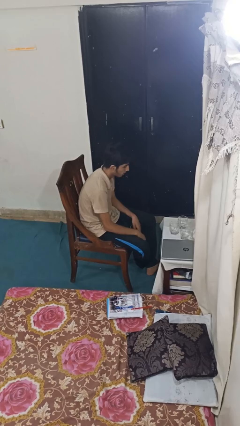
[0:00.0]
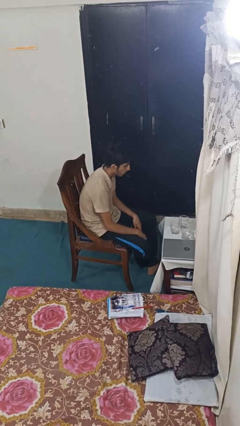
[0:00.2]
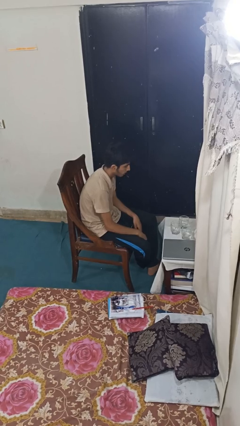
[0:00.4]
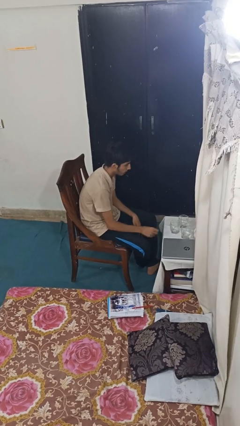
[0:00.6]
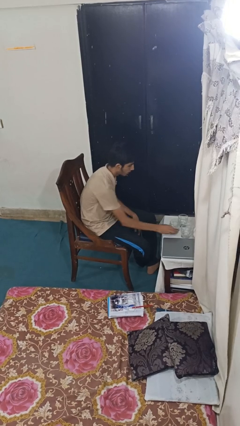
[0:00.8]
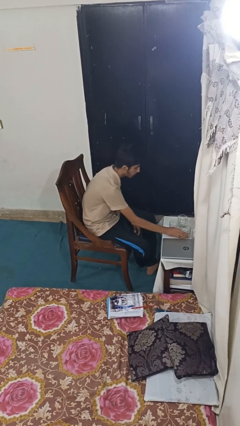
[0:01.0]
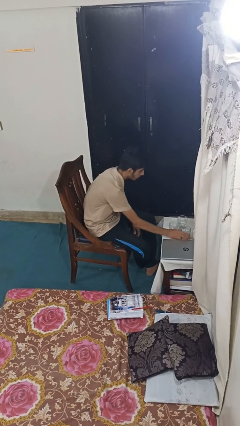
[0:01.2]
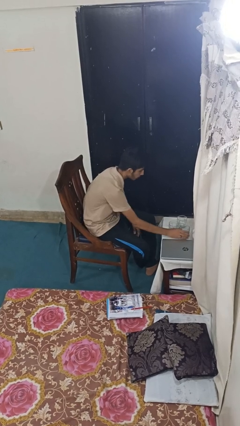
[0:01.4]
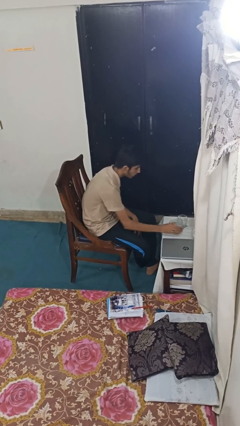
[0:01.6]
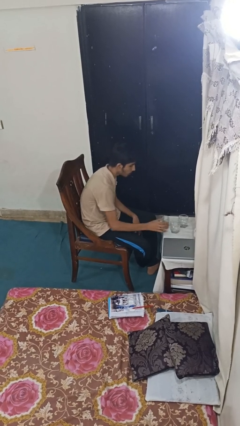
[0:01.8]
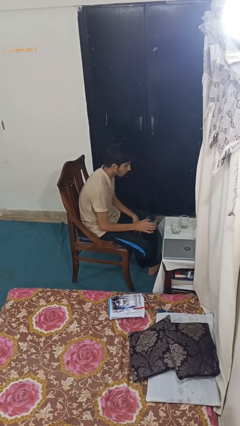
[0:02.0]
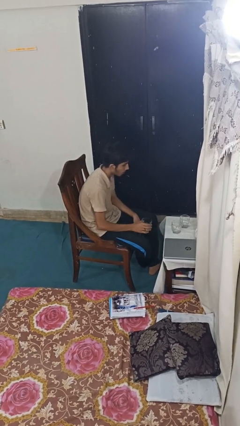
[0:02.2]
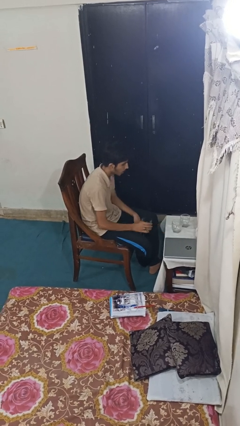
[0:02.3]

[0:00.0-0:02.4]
person picks up object from table

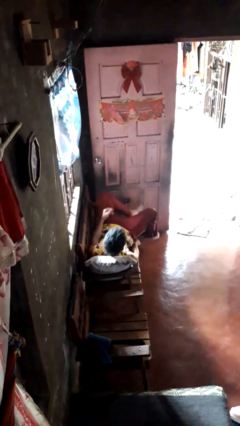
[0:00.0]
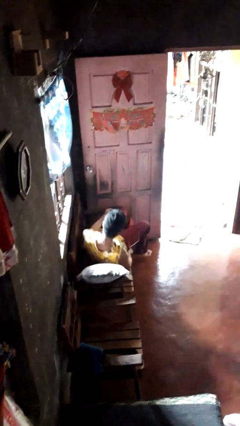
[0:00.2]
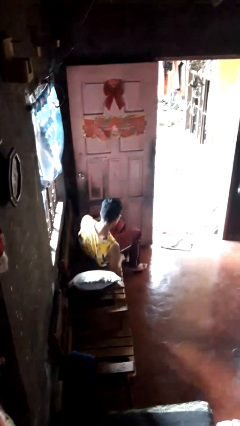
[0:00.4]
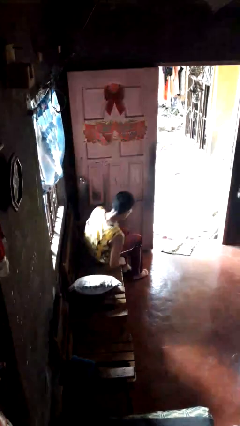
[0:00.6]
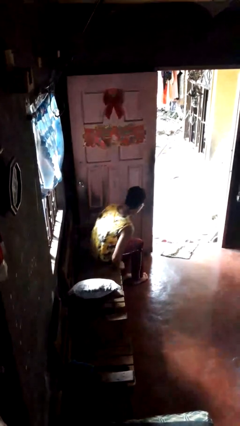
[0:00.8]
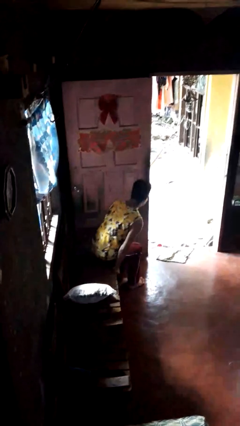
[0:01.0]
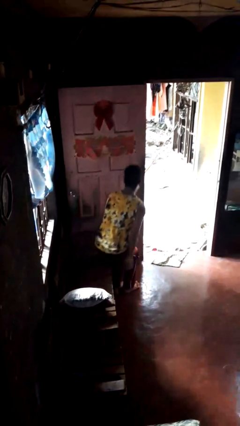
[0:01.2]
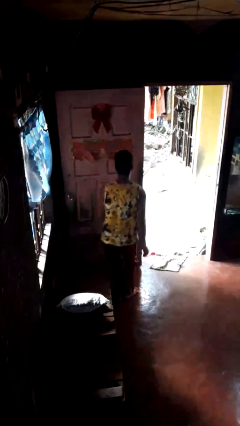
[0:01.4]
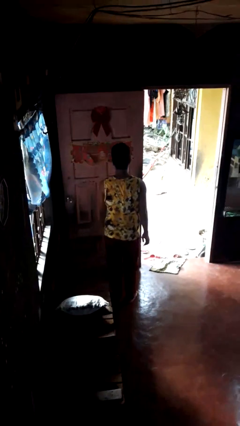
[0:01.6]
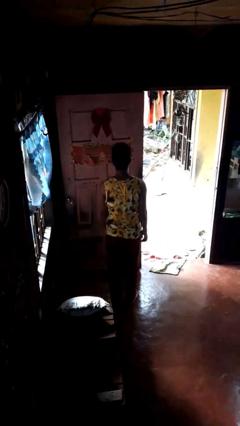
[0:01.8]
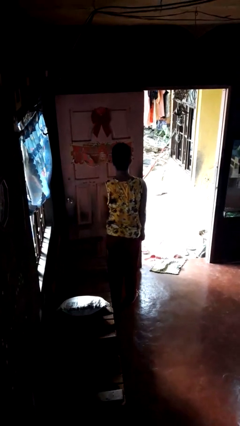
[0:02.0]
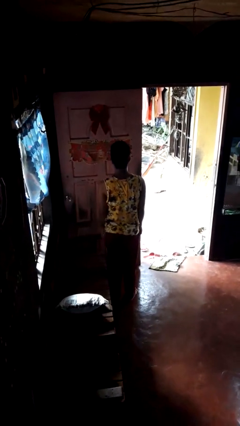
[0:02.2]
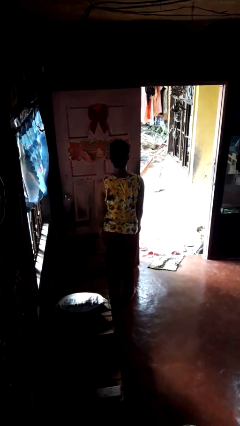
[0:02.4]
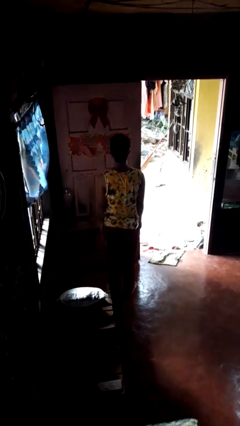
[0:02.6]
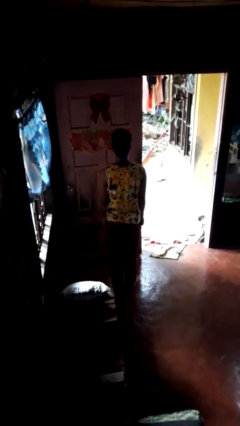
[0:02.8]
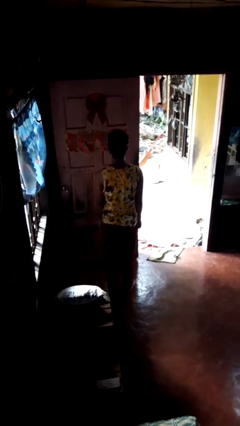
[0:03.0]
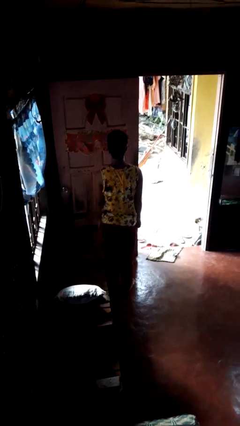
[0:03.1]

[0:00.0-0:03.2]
person stands up

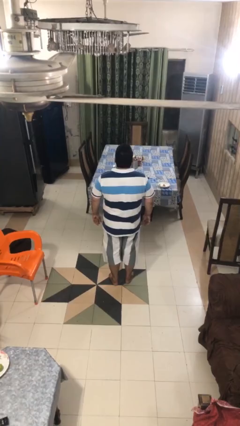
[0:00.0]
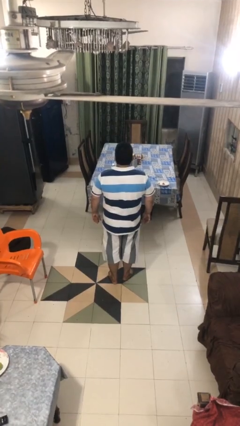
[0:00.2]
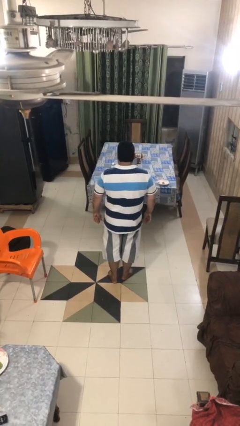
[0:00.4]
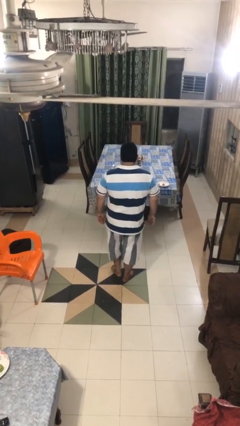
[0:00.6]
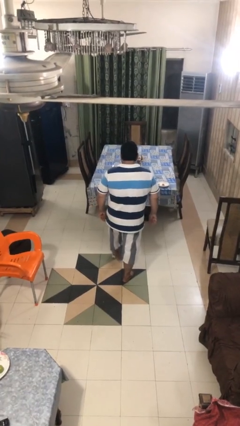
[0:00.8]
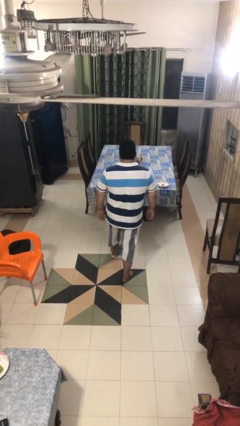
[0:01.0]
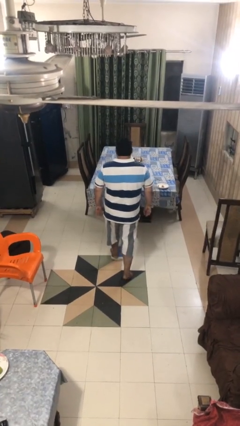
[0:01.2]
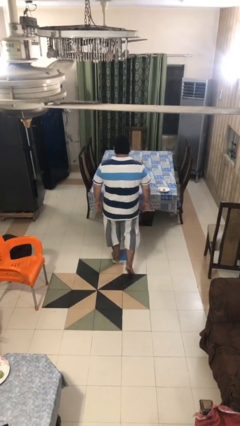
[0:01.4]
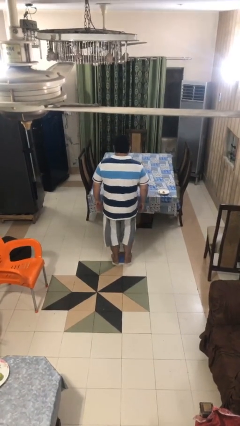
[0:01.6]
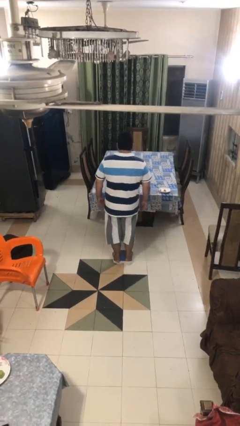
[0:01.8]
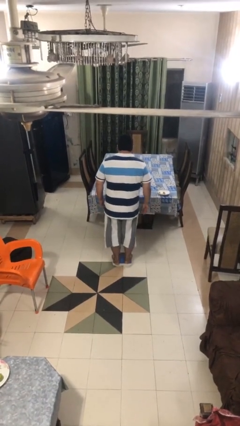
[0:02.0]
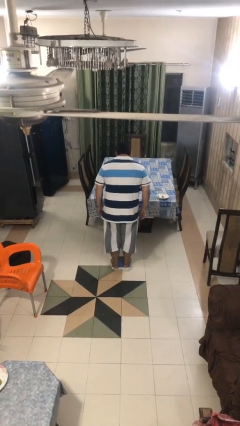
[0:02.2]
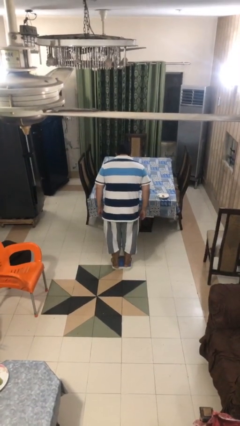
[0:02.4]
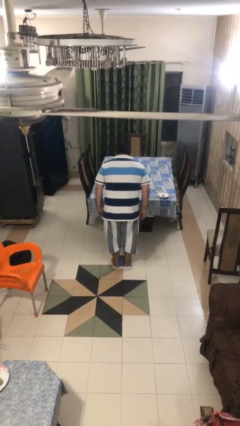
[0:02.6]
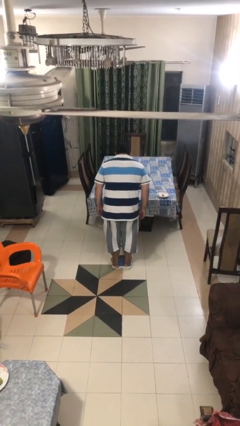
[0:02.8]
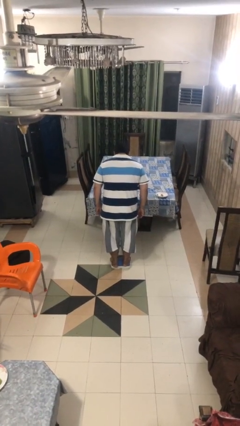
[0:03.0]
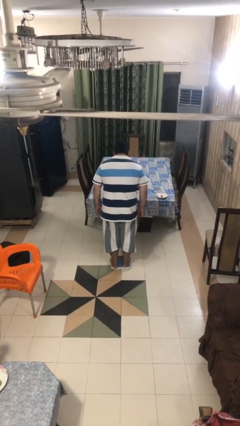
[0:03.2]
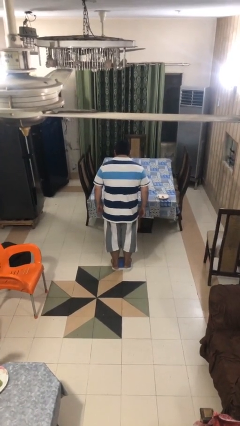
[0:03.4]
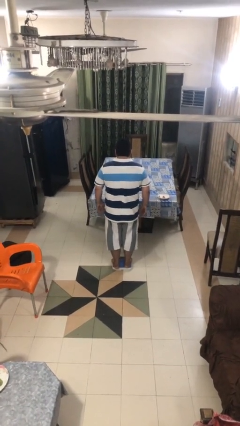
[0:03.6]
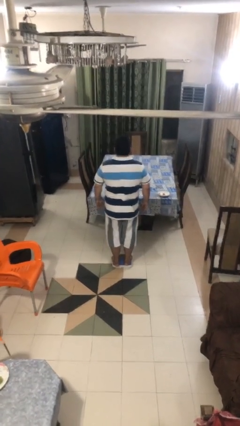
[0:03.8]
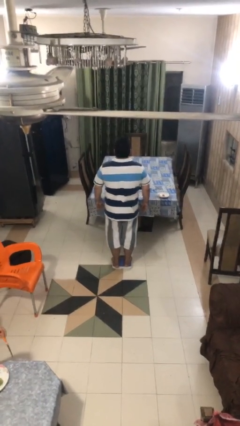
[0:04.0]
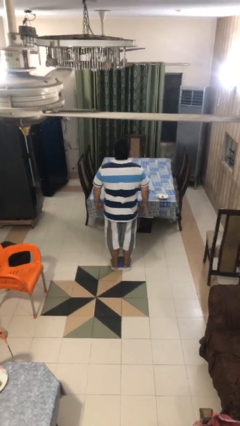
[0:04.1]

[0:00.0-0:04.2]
person uses bodyweight scale

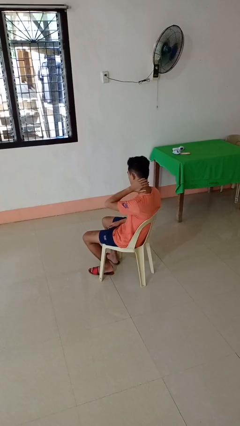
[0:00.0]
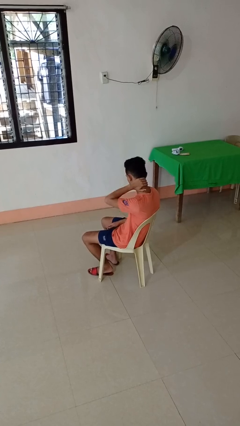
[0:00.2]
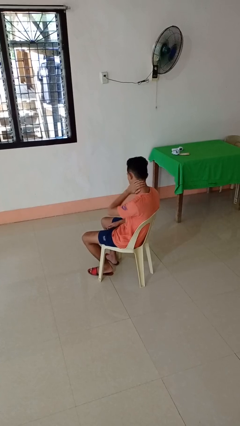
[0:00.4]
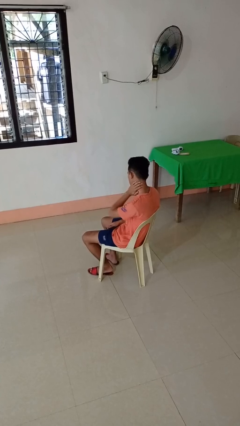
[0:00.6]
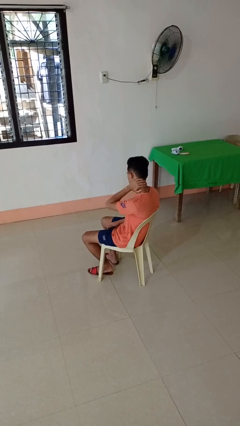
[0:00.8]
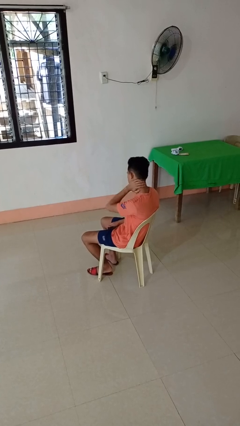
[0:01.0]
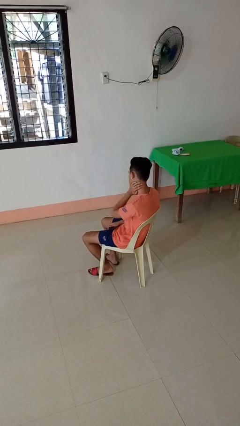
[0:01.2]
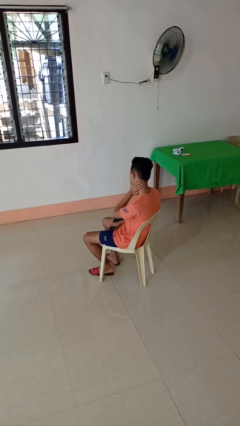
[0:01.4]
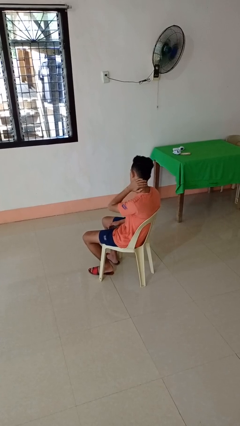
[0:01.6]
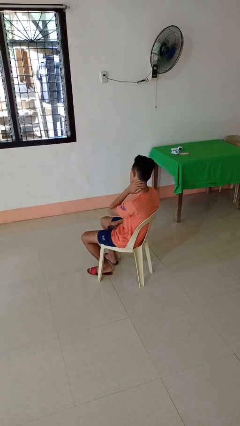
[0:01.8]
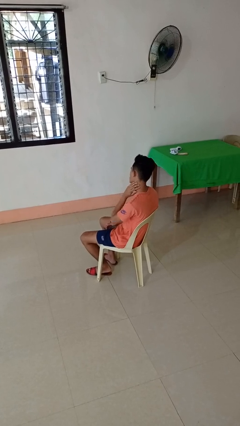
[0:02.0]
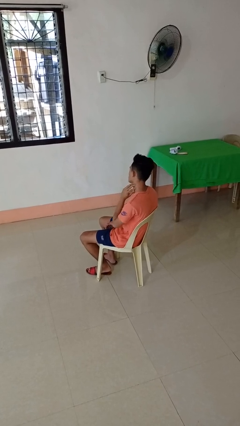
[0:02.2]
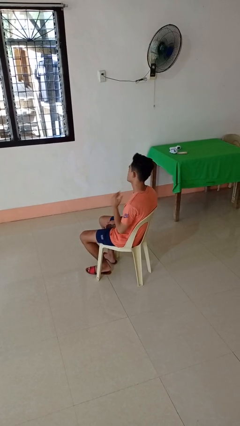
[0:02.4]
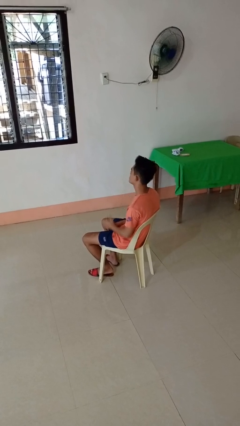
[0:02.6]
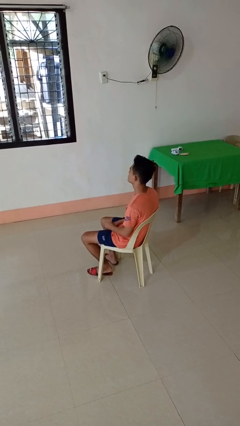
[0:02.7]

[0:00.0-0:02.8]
person rubs neck

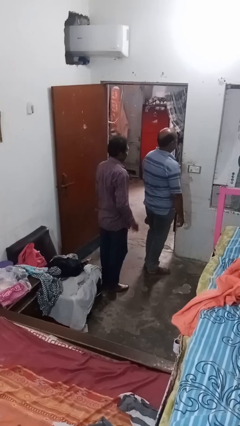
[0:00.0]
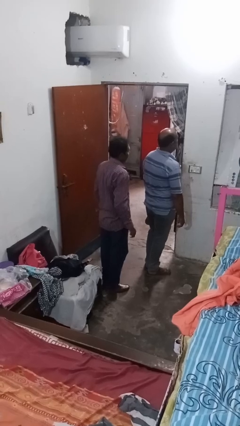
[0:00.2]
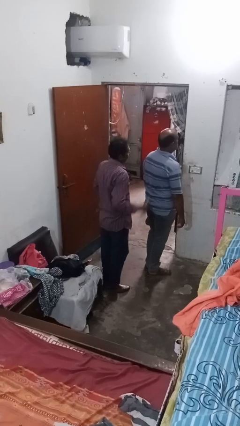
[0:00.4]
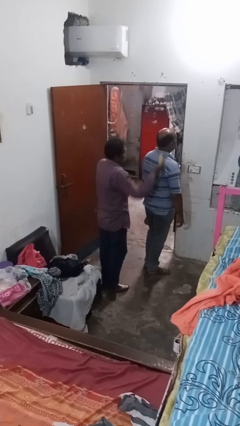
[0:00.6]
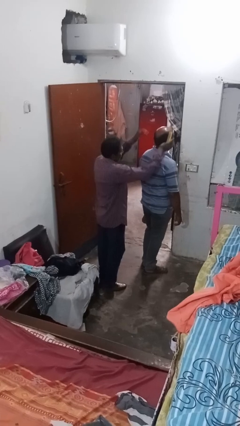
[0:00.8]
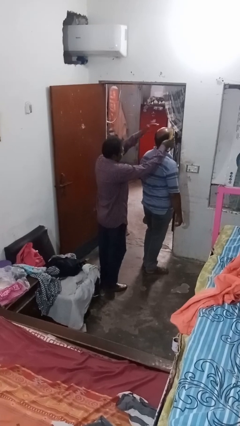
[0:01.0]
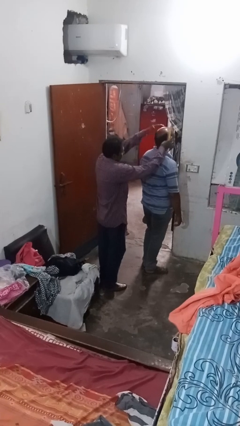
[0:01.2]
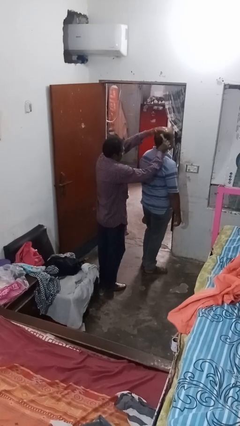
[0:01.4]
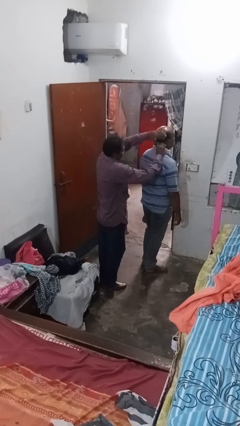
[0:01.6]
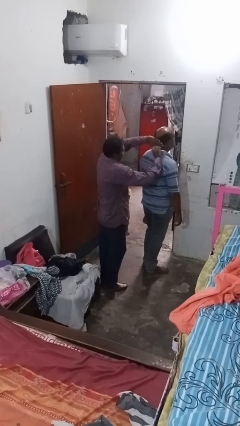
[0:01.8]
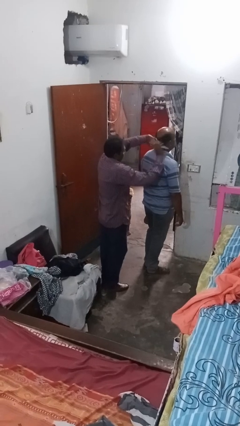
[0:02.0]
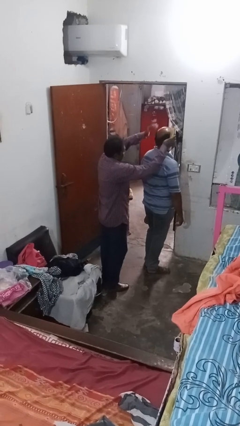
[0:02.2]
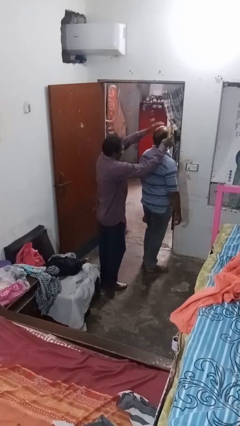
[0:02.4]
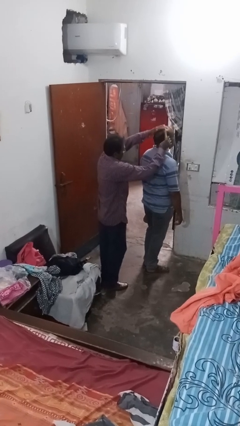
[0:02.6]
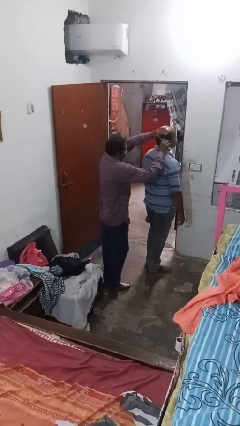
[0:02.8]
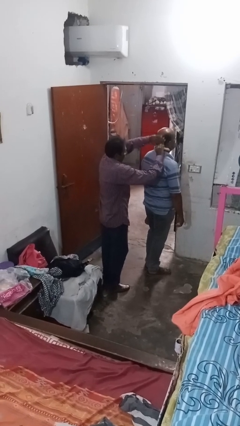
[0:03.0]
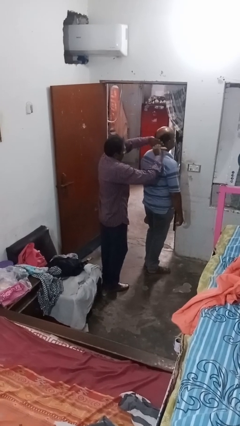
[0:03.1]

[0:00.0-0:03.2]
person brushes hair of person

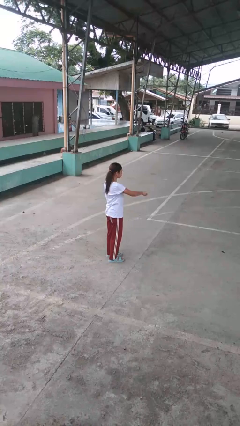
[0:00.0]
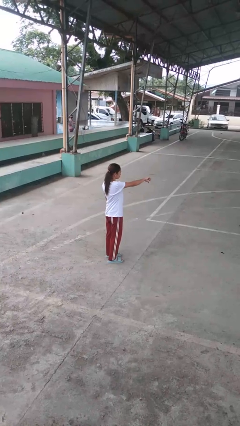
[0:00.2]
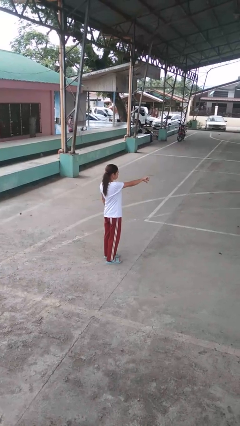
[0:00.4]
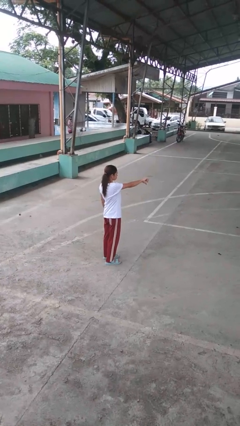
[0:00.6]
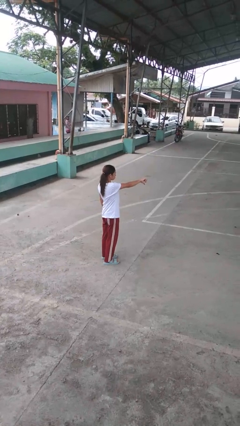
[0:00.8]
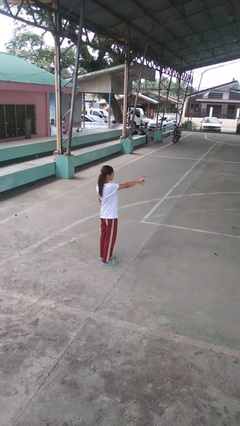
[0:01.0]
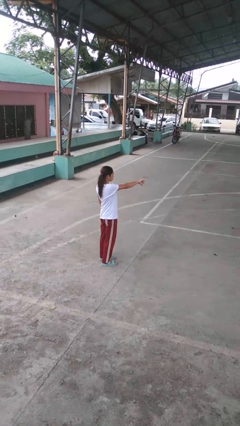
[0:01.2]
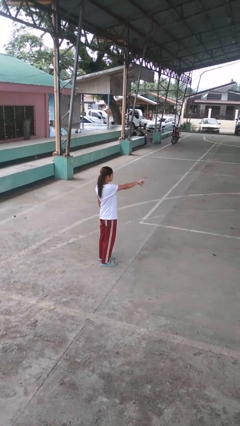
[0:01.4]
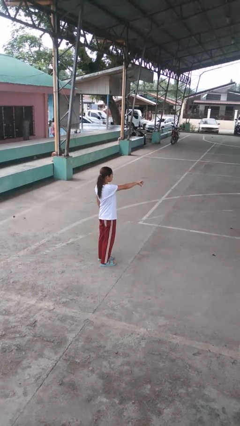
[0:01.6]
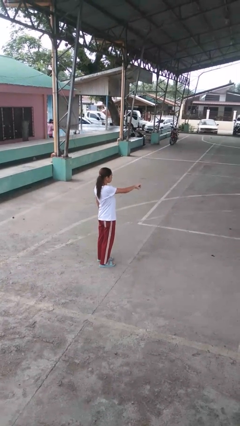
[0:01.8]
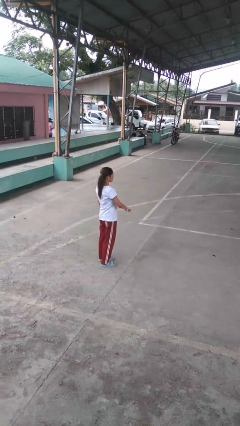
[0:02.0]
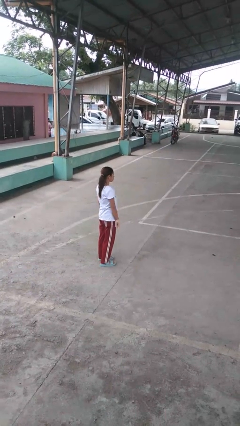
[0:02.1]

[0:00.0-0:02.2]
person gestures thumbs down
